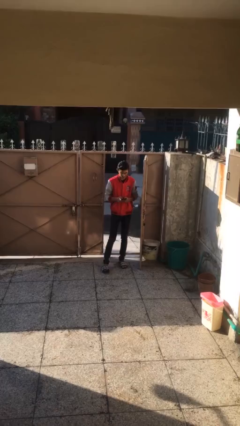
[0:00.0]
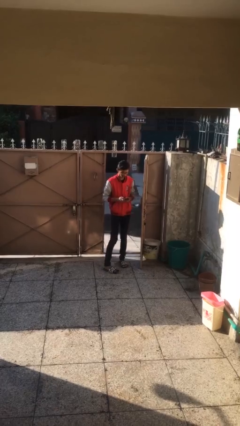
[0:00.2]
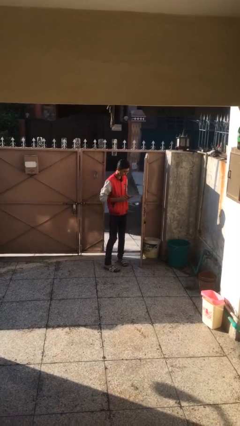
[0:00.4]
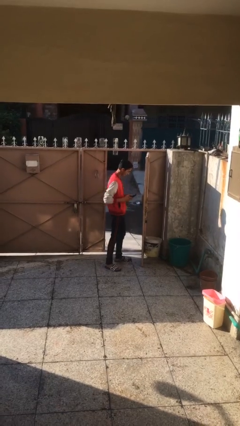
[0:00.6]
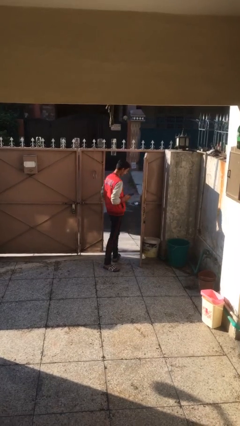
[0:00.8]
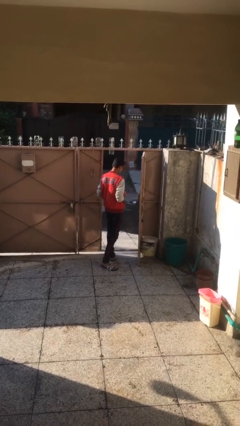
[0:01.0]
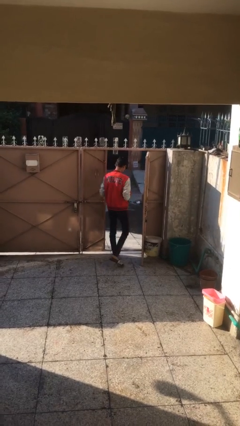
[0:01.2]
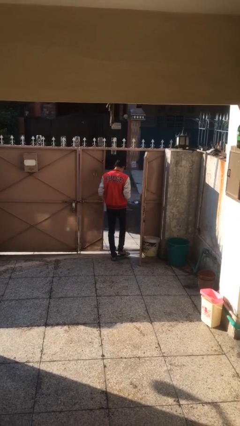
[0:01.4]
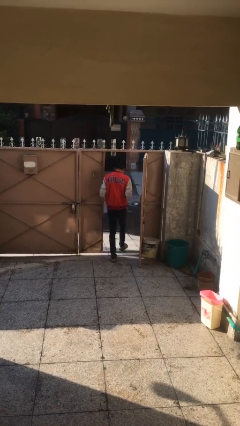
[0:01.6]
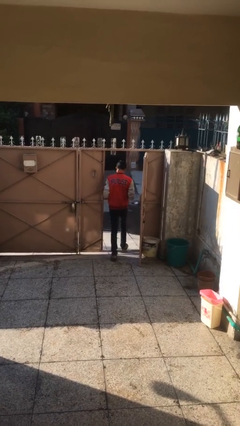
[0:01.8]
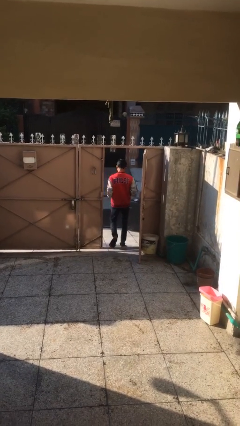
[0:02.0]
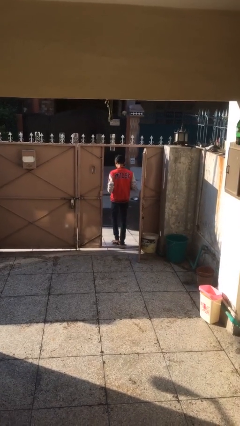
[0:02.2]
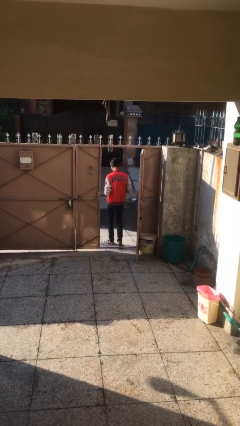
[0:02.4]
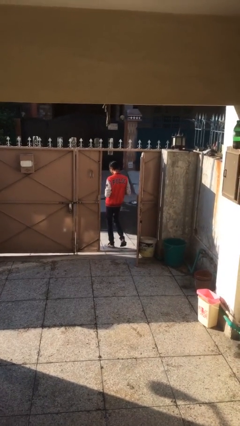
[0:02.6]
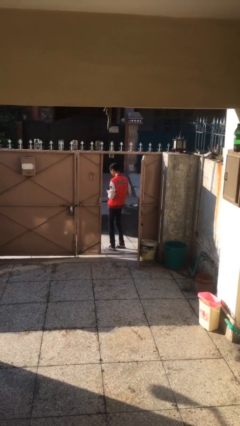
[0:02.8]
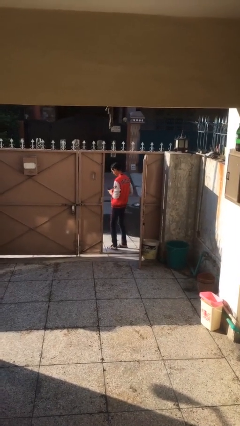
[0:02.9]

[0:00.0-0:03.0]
person exits scene through structure

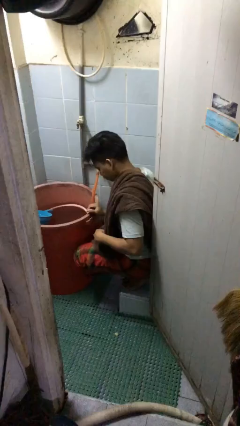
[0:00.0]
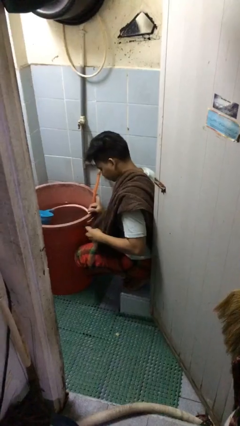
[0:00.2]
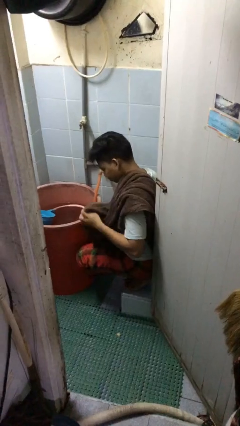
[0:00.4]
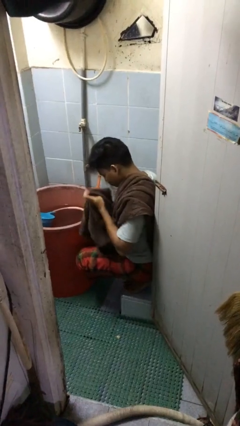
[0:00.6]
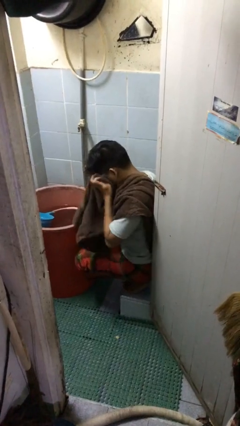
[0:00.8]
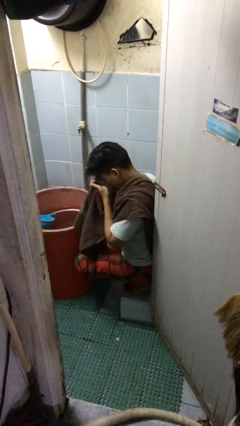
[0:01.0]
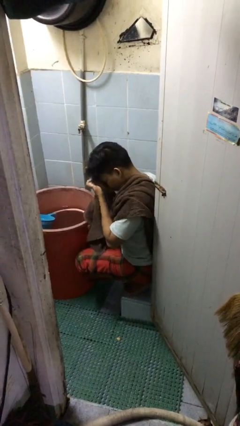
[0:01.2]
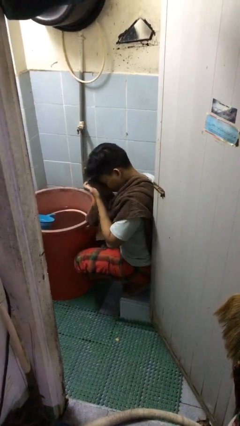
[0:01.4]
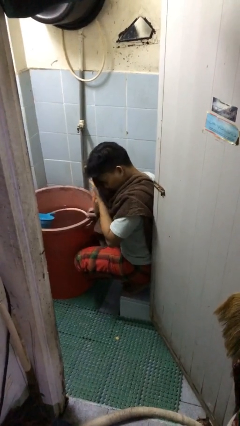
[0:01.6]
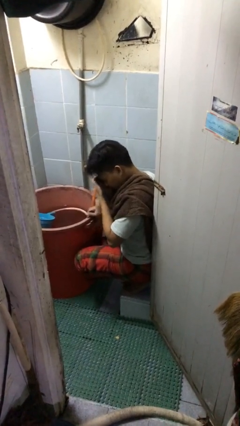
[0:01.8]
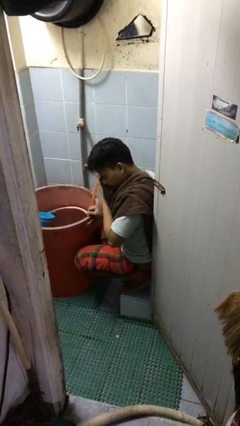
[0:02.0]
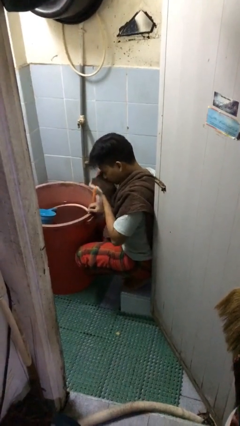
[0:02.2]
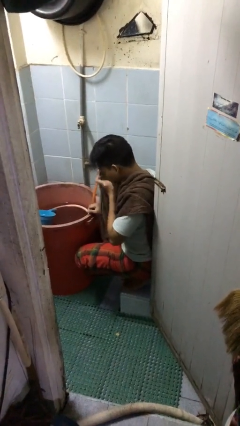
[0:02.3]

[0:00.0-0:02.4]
person dries face with towel

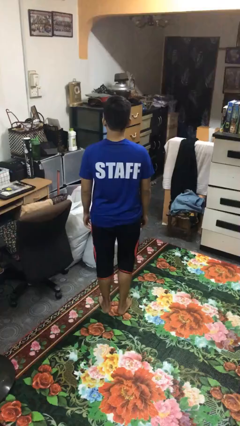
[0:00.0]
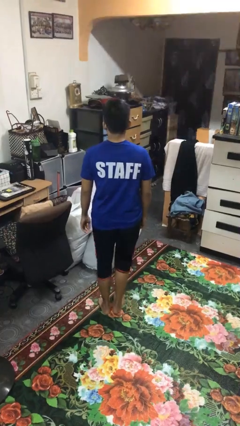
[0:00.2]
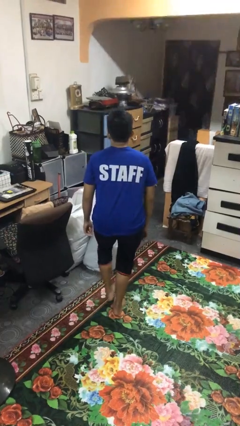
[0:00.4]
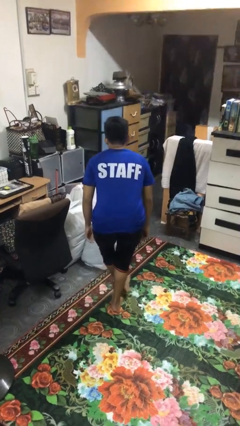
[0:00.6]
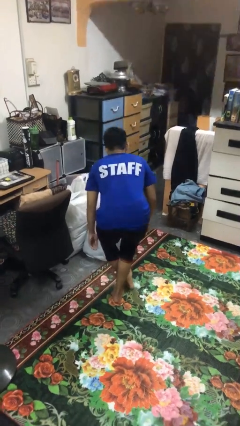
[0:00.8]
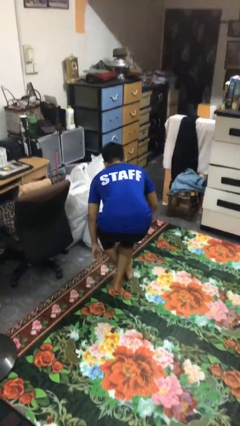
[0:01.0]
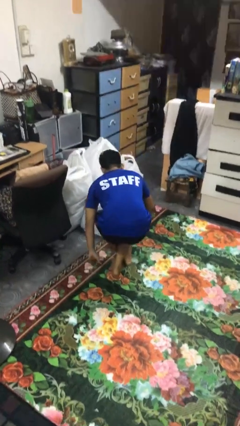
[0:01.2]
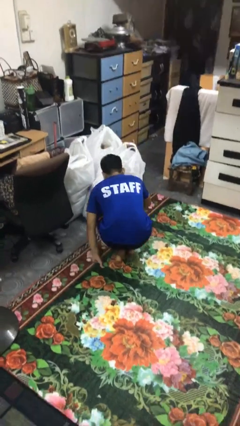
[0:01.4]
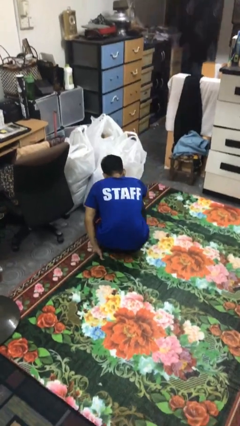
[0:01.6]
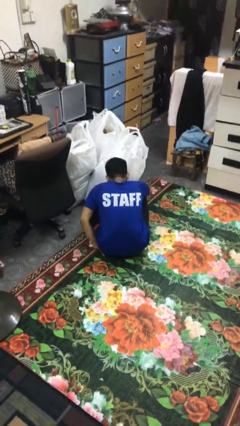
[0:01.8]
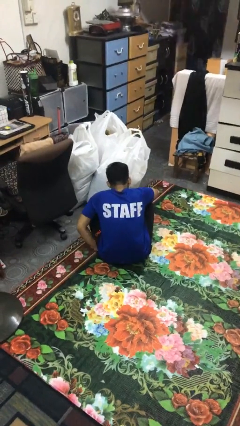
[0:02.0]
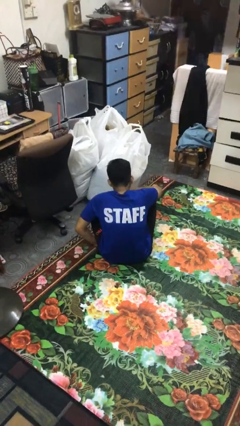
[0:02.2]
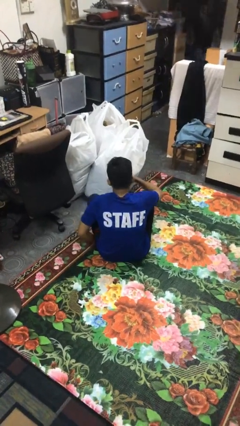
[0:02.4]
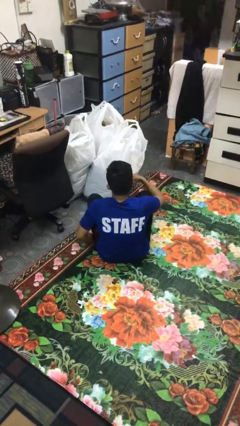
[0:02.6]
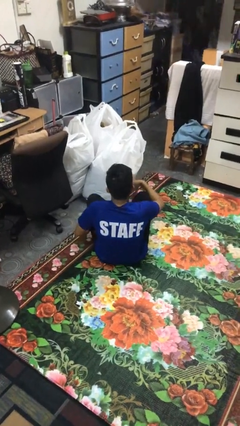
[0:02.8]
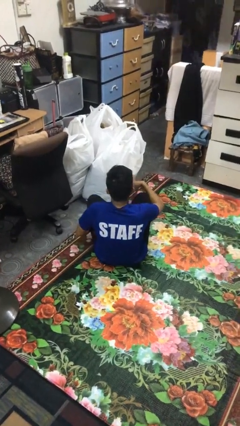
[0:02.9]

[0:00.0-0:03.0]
person sits crisscross

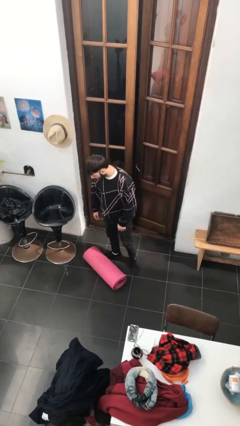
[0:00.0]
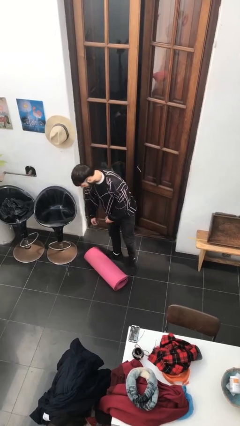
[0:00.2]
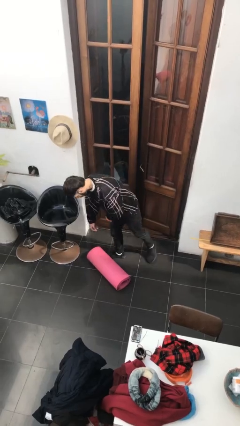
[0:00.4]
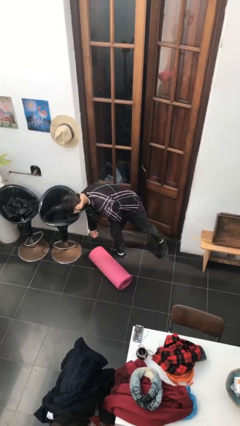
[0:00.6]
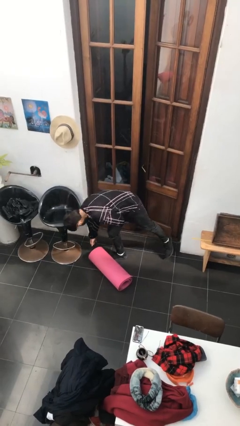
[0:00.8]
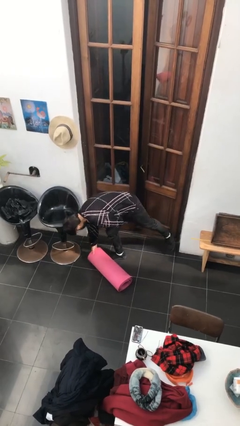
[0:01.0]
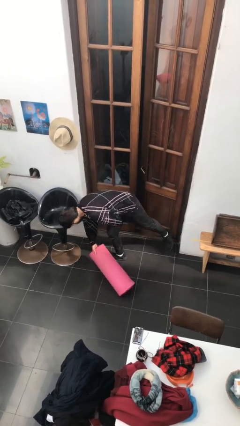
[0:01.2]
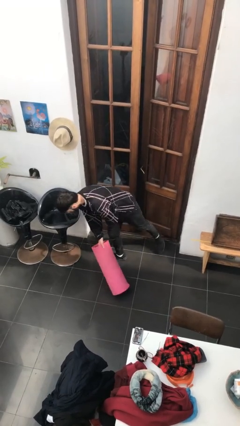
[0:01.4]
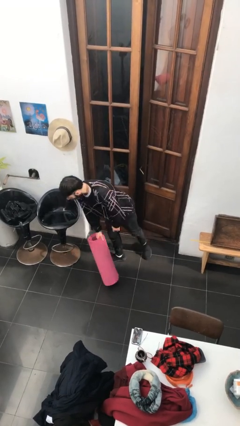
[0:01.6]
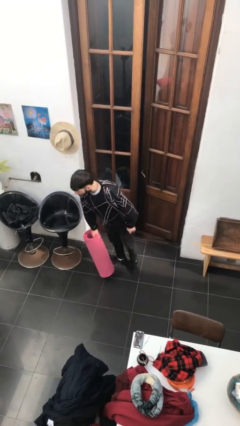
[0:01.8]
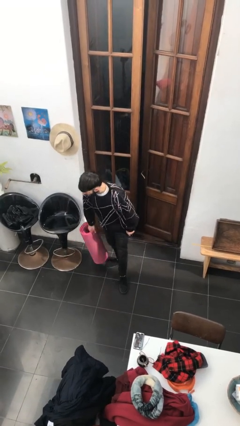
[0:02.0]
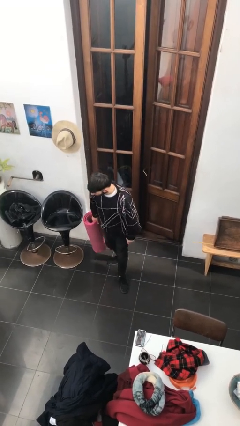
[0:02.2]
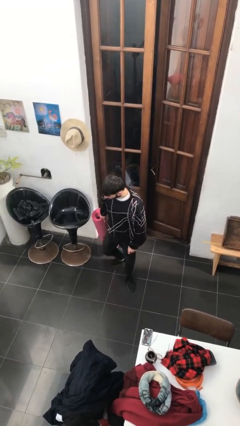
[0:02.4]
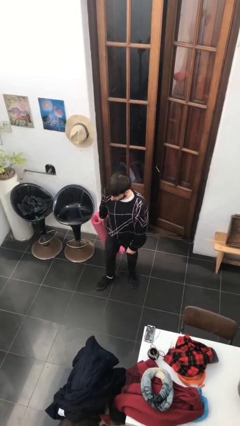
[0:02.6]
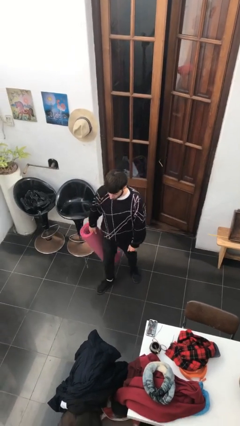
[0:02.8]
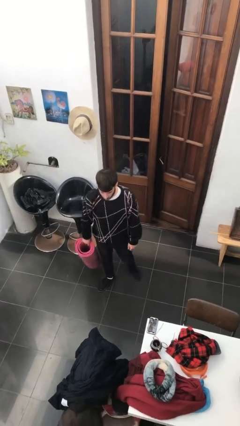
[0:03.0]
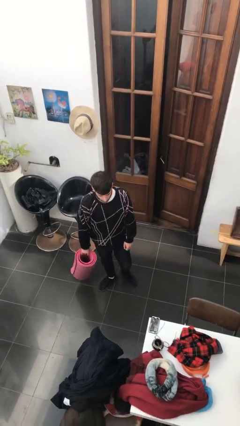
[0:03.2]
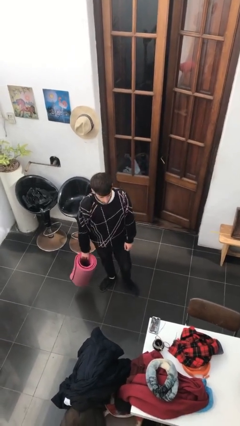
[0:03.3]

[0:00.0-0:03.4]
person picks up object from floor

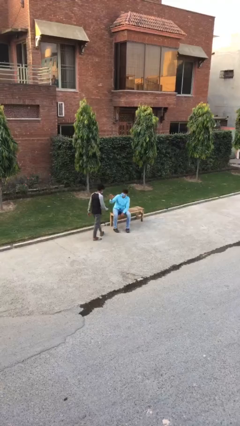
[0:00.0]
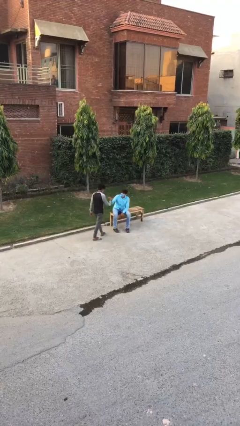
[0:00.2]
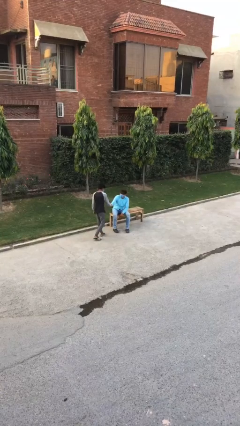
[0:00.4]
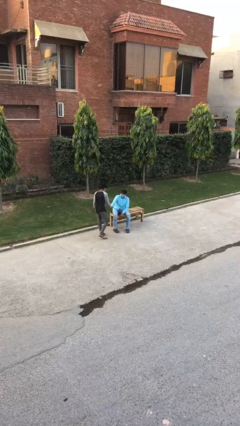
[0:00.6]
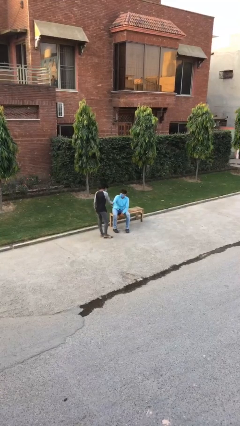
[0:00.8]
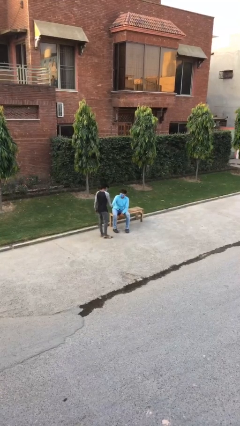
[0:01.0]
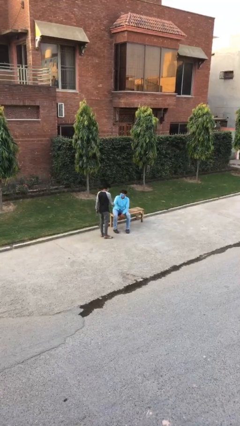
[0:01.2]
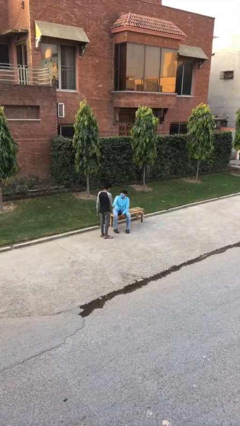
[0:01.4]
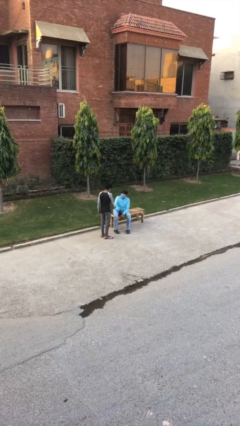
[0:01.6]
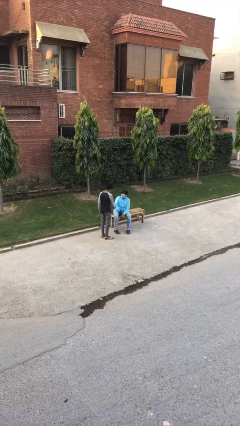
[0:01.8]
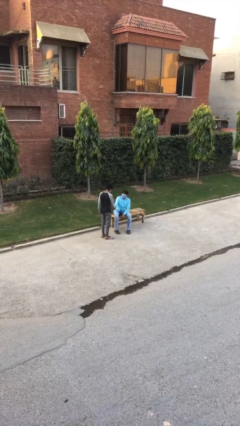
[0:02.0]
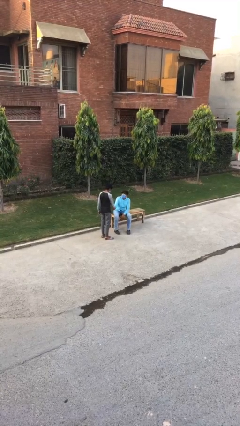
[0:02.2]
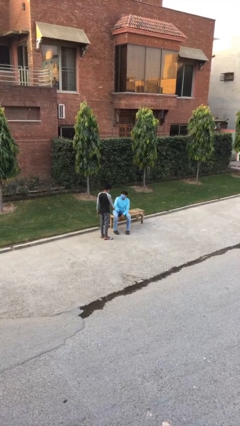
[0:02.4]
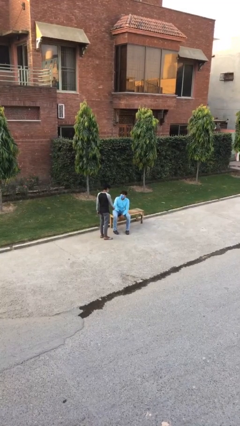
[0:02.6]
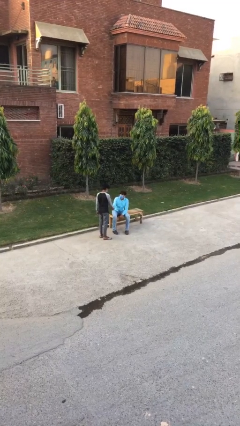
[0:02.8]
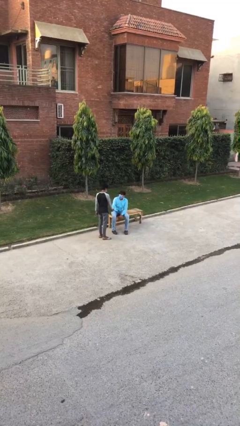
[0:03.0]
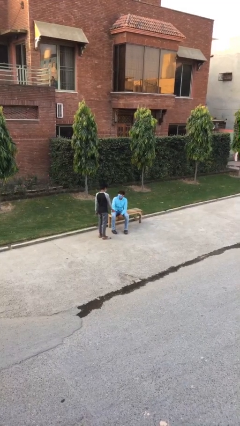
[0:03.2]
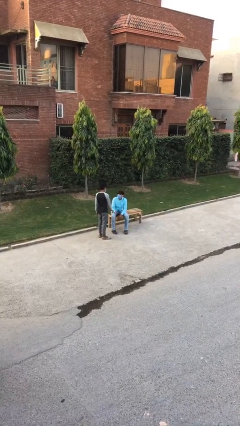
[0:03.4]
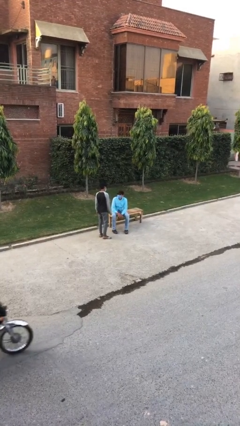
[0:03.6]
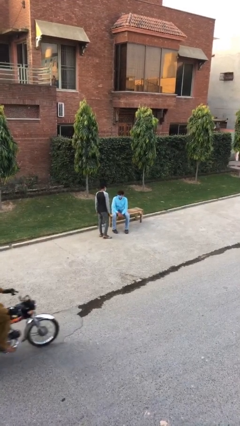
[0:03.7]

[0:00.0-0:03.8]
person shakes hand

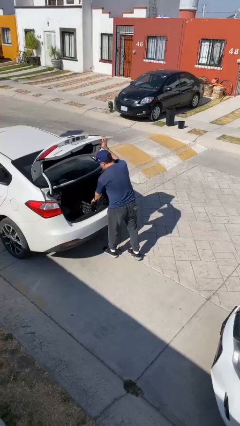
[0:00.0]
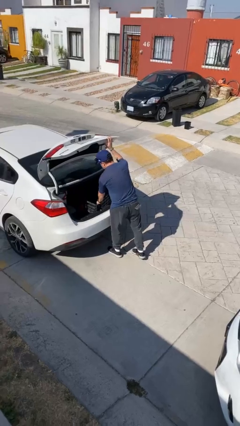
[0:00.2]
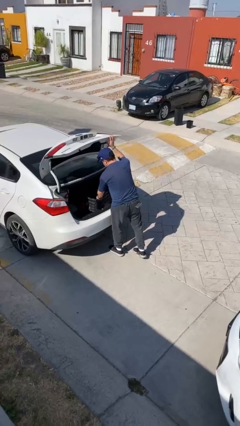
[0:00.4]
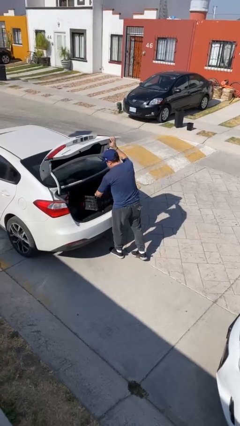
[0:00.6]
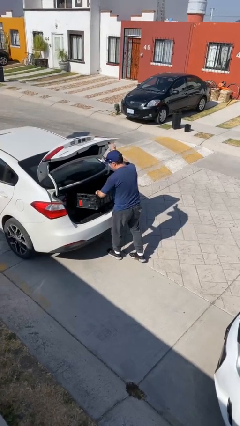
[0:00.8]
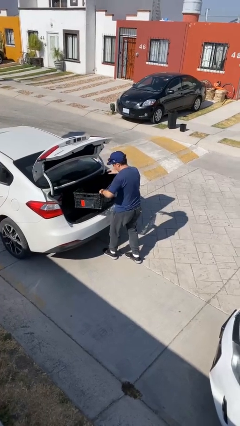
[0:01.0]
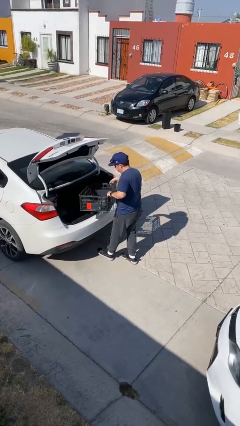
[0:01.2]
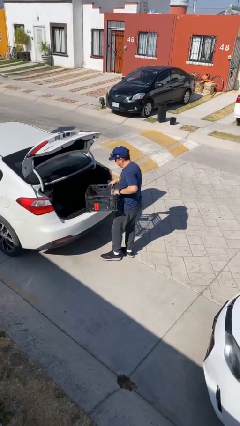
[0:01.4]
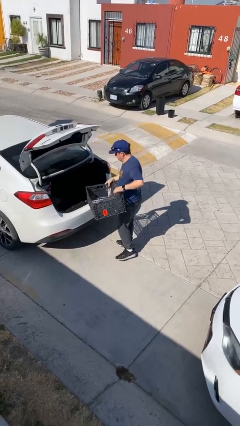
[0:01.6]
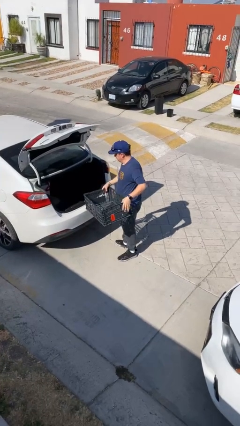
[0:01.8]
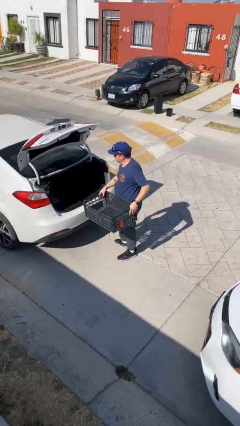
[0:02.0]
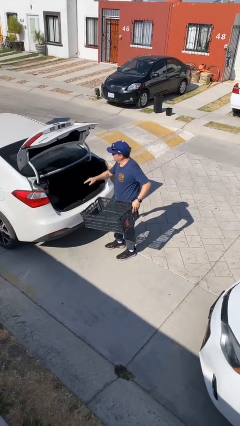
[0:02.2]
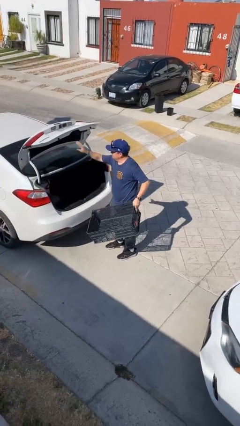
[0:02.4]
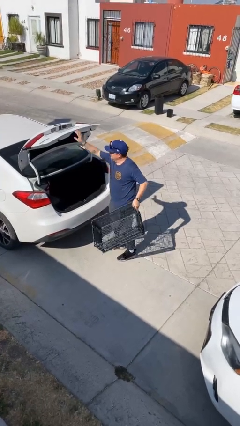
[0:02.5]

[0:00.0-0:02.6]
person unloads car
